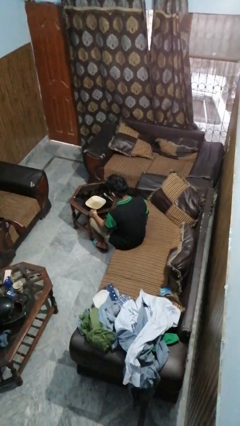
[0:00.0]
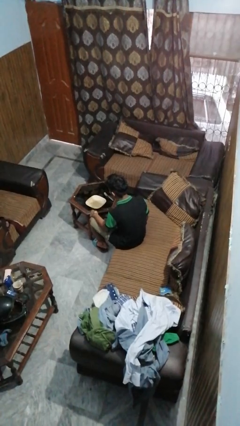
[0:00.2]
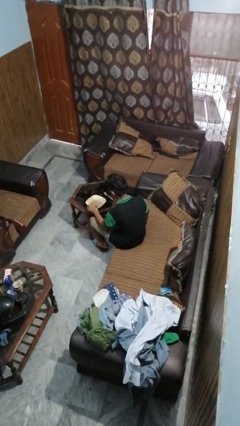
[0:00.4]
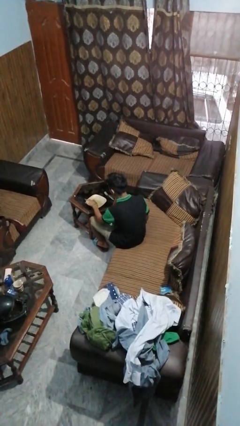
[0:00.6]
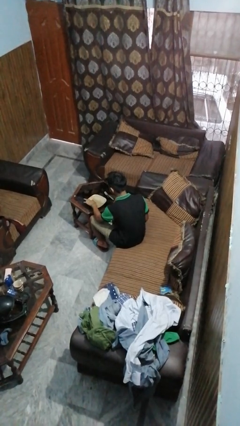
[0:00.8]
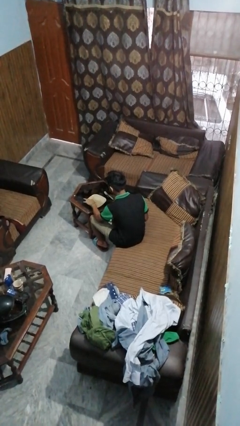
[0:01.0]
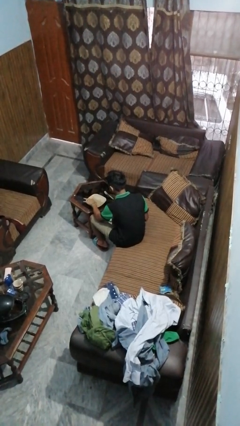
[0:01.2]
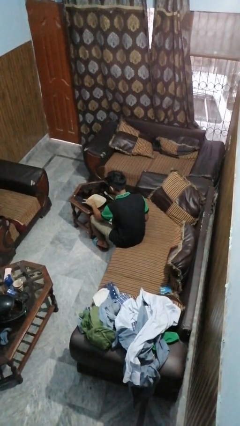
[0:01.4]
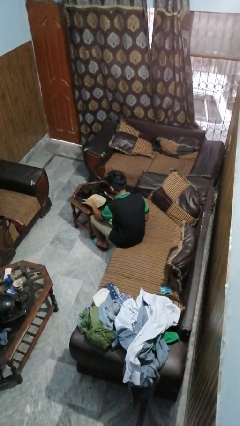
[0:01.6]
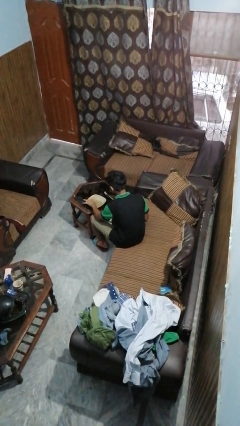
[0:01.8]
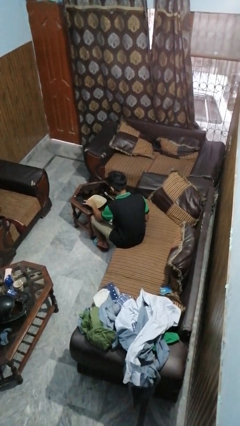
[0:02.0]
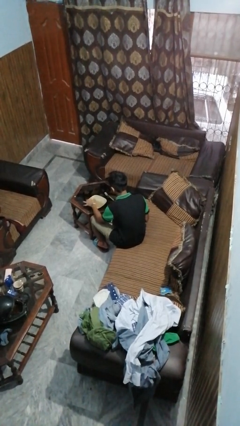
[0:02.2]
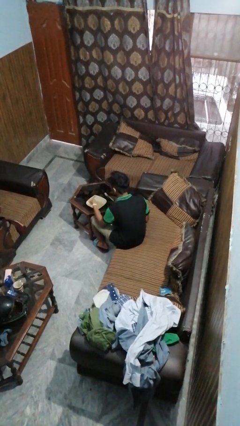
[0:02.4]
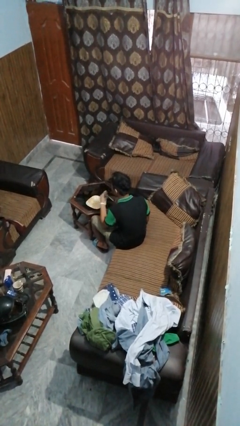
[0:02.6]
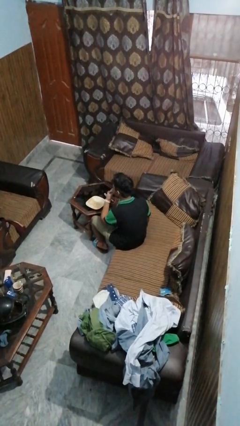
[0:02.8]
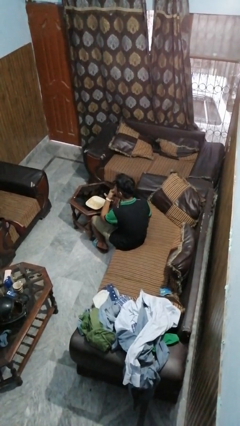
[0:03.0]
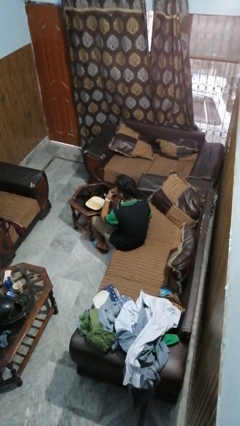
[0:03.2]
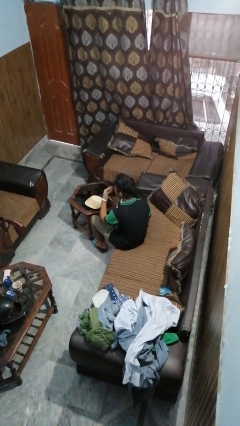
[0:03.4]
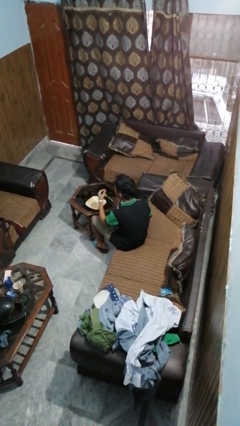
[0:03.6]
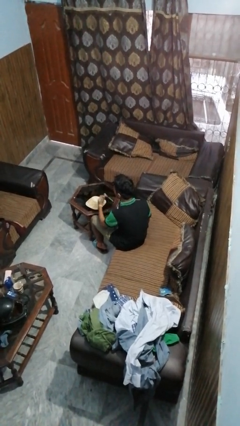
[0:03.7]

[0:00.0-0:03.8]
person eats with hands

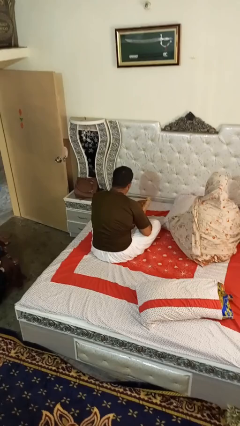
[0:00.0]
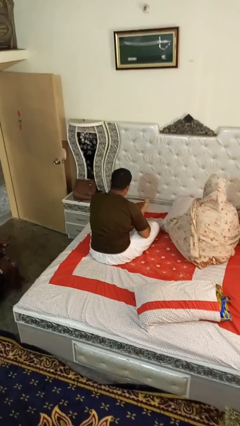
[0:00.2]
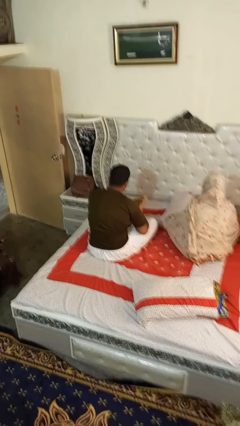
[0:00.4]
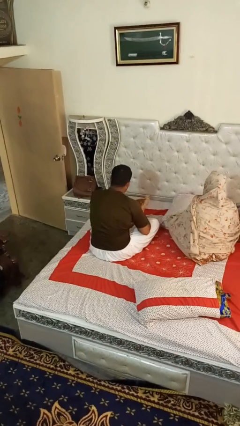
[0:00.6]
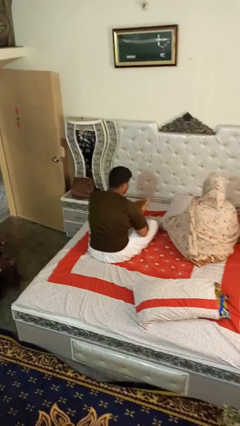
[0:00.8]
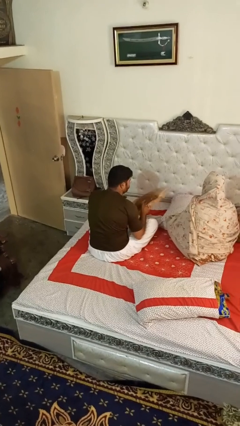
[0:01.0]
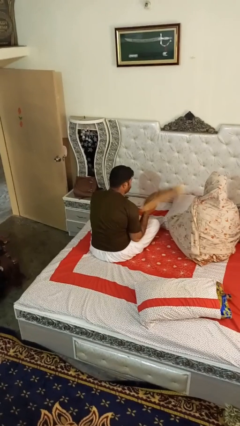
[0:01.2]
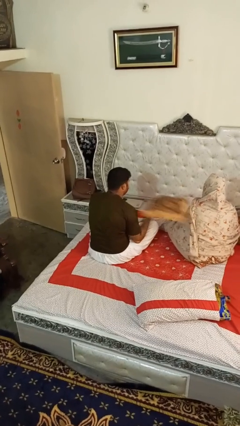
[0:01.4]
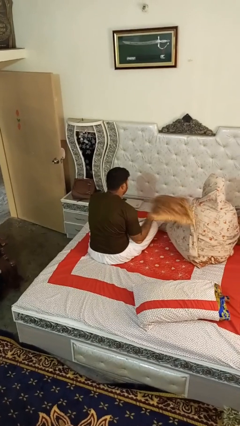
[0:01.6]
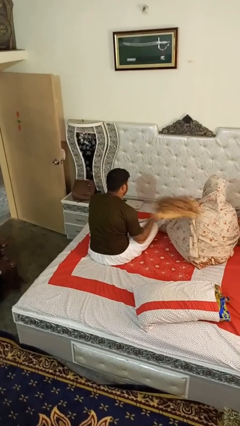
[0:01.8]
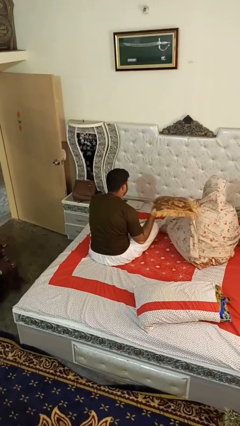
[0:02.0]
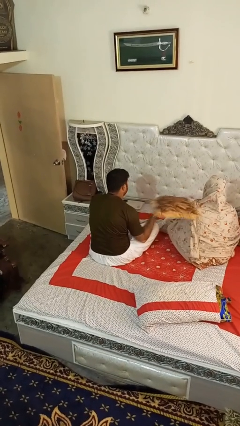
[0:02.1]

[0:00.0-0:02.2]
person hits person with pillow

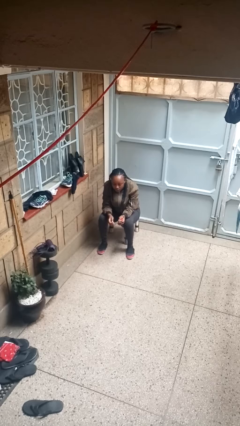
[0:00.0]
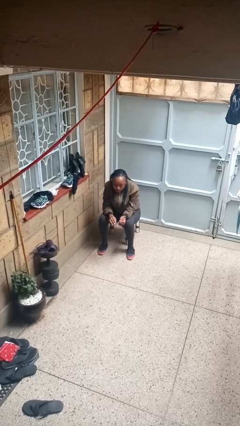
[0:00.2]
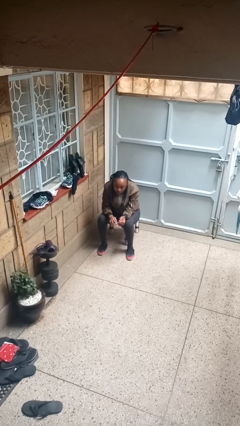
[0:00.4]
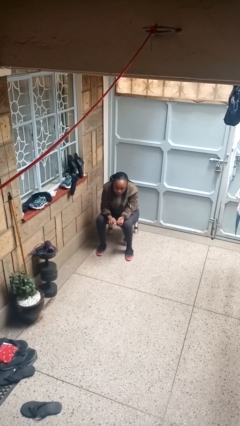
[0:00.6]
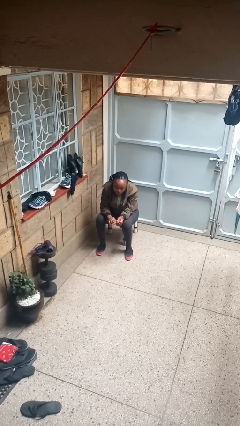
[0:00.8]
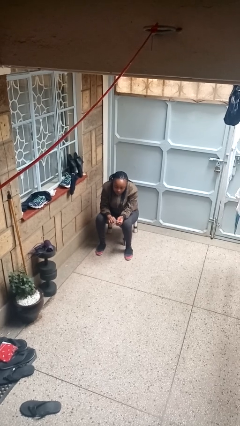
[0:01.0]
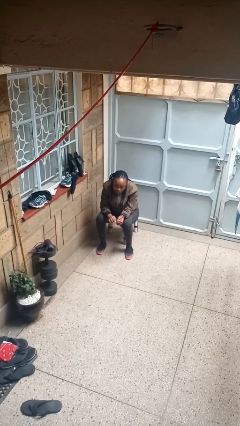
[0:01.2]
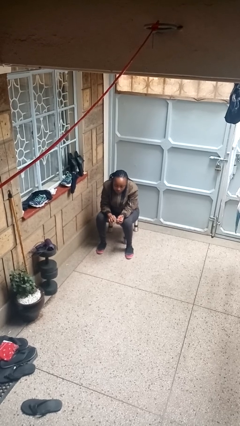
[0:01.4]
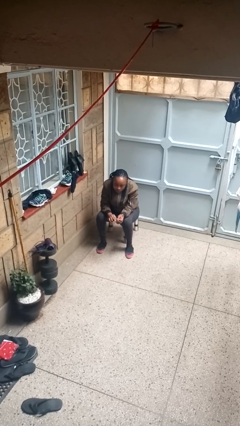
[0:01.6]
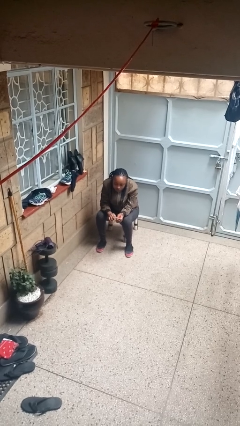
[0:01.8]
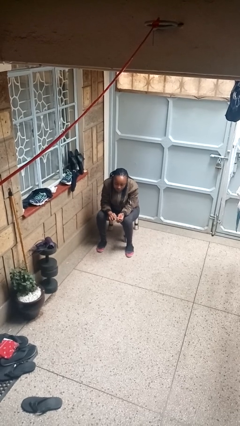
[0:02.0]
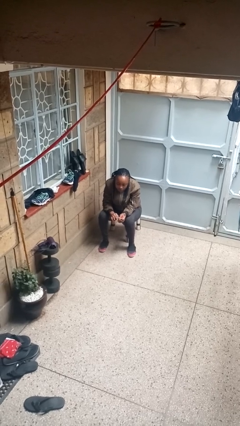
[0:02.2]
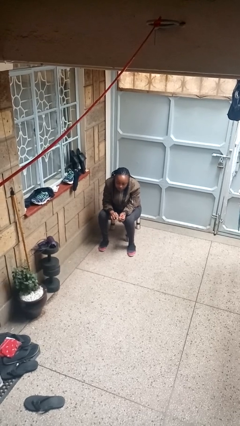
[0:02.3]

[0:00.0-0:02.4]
person paints fingernails

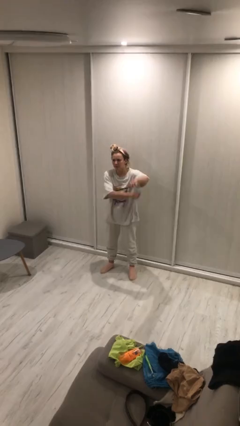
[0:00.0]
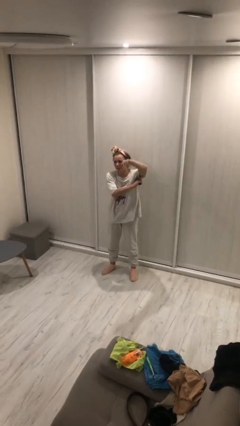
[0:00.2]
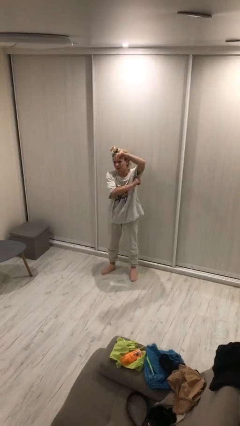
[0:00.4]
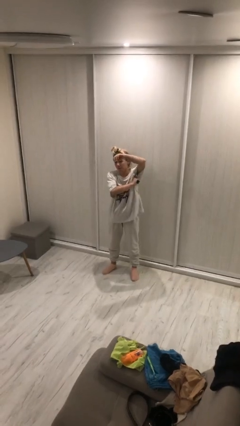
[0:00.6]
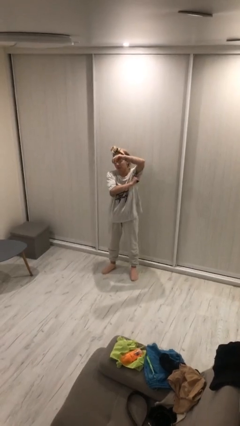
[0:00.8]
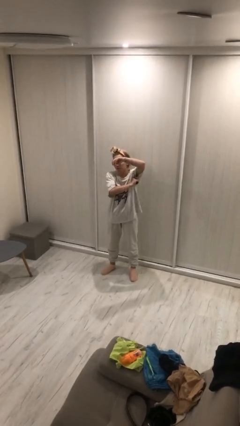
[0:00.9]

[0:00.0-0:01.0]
person applies deodorant

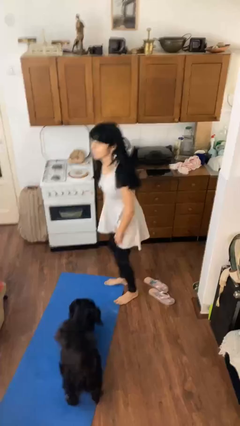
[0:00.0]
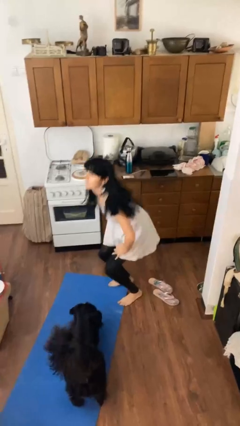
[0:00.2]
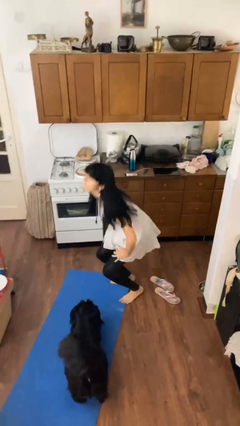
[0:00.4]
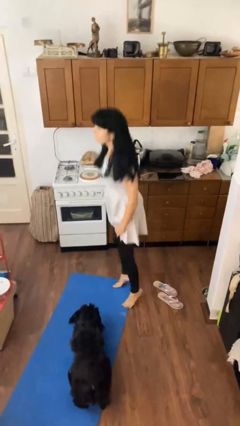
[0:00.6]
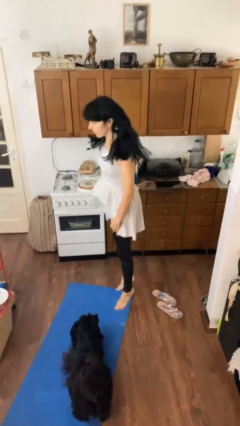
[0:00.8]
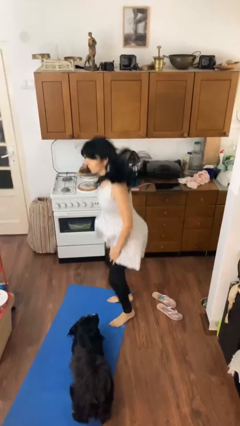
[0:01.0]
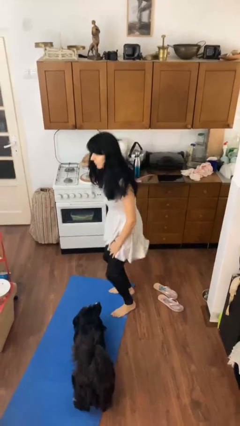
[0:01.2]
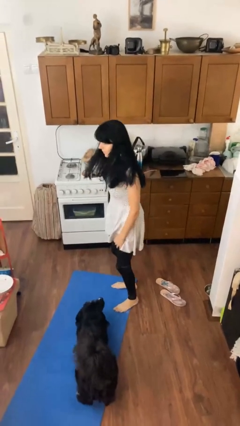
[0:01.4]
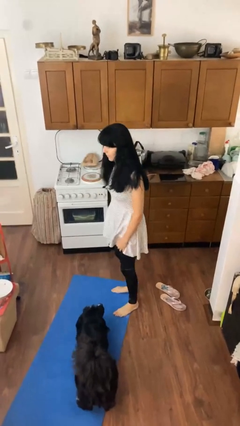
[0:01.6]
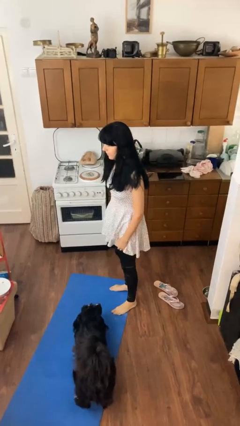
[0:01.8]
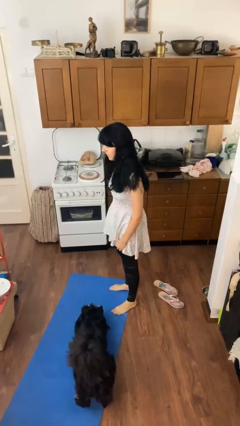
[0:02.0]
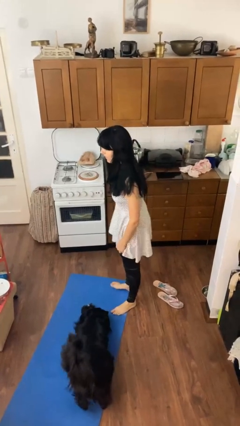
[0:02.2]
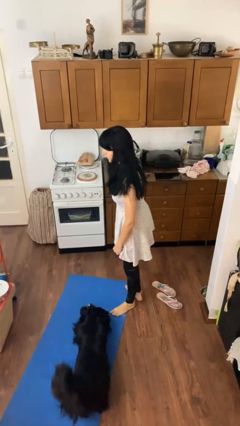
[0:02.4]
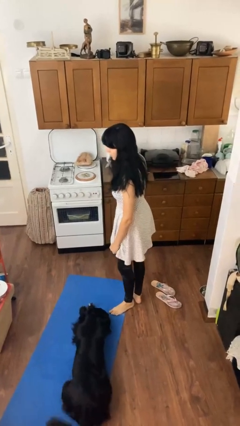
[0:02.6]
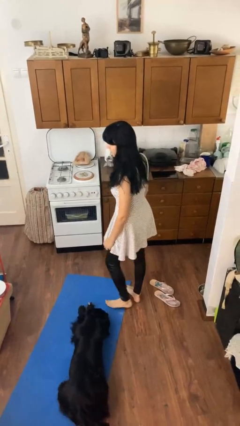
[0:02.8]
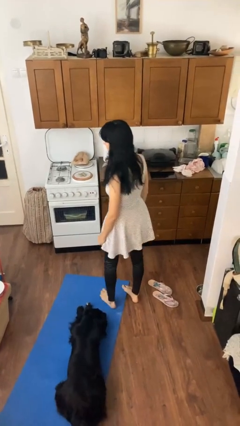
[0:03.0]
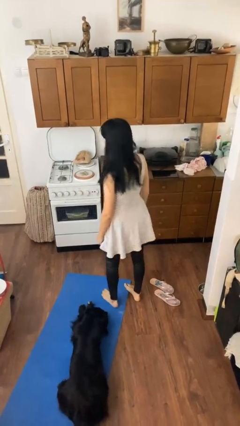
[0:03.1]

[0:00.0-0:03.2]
person jumps

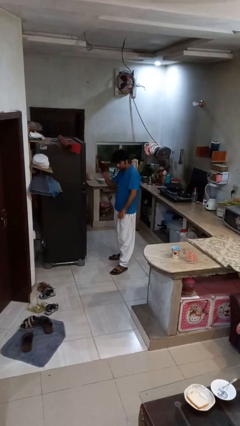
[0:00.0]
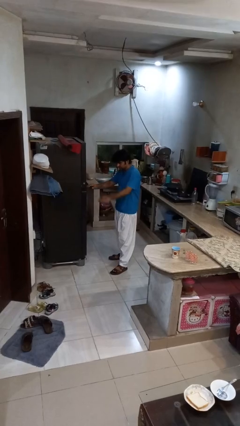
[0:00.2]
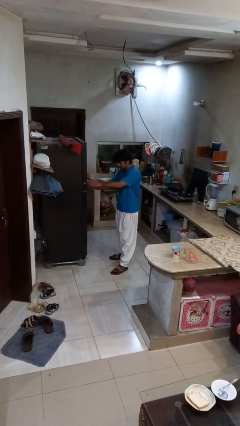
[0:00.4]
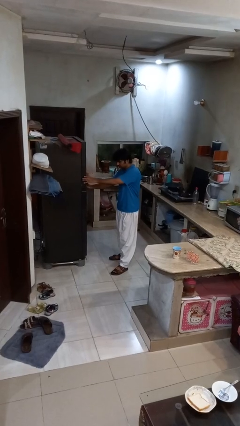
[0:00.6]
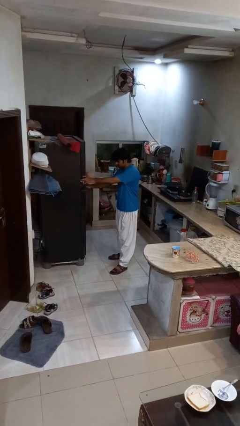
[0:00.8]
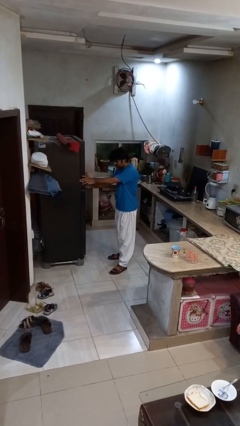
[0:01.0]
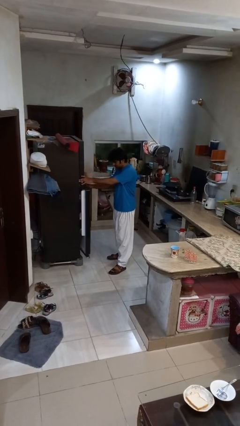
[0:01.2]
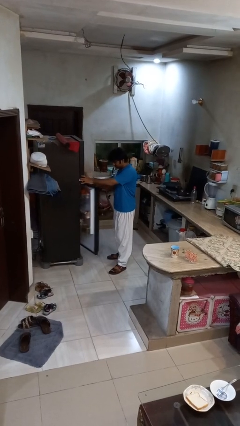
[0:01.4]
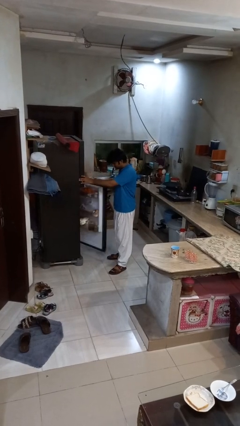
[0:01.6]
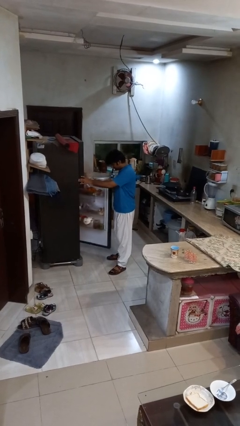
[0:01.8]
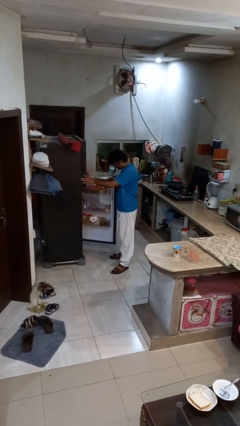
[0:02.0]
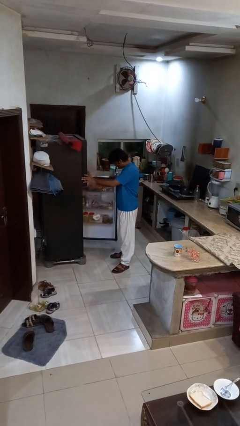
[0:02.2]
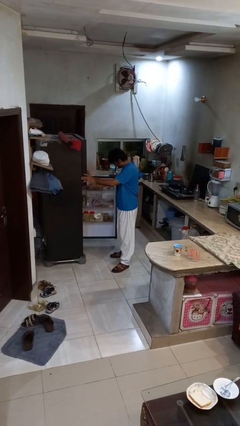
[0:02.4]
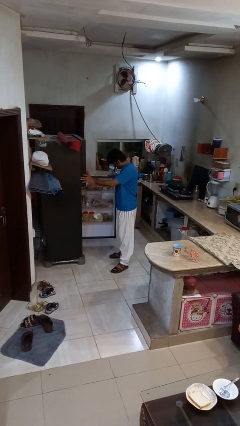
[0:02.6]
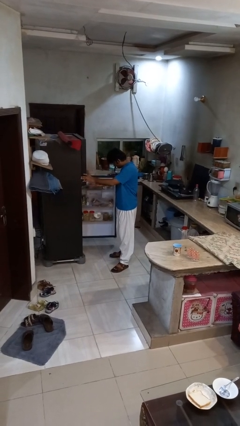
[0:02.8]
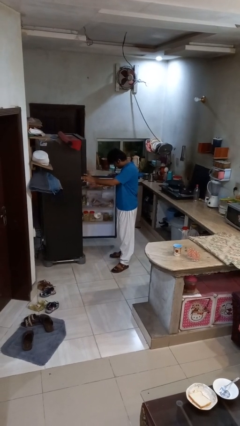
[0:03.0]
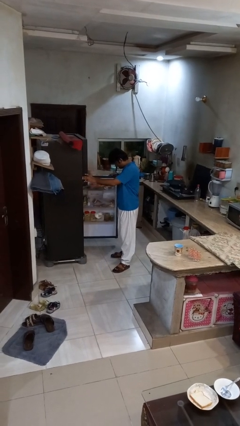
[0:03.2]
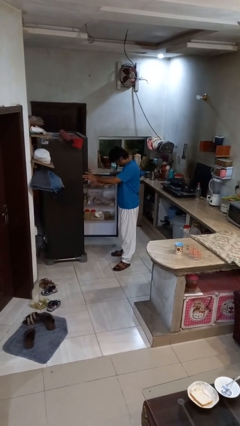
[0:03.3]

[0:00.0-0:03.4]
person opens refrigerator

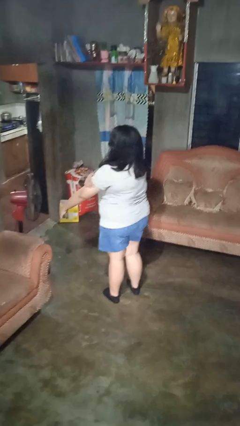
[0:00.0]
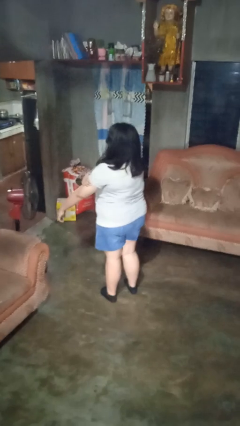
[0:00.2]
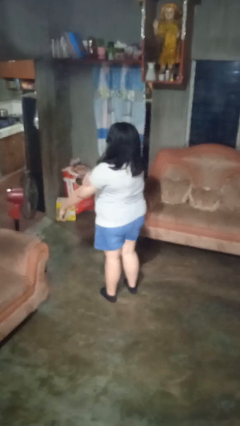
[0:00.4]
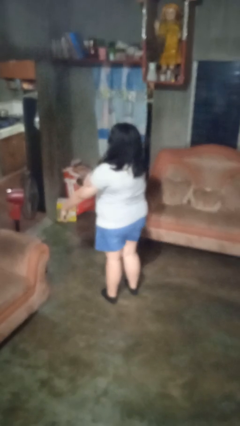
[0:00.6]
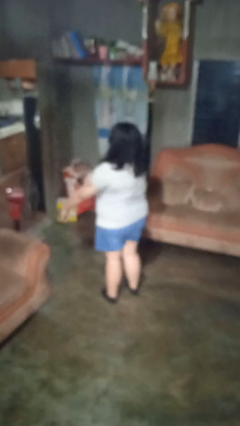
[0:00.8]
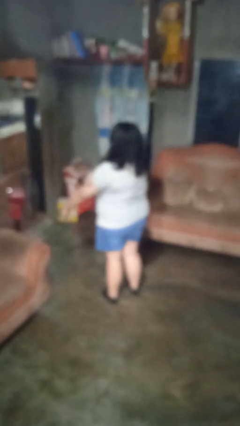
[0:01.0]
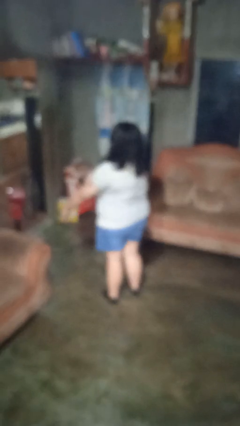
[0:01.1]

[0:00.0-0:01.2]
person swats bug
